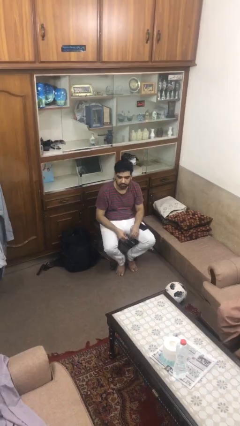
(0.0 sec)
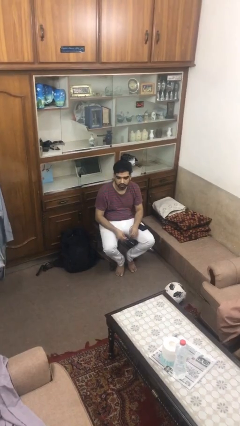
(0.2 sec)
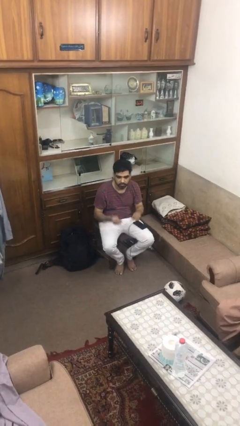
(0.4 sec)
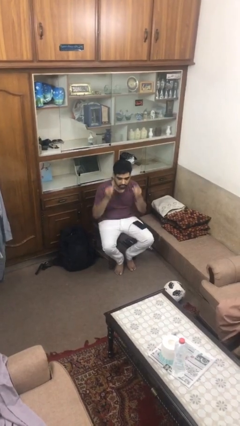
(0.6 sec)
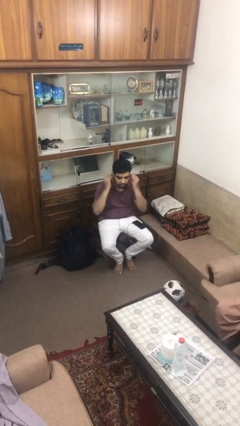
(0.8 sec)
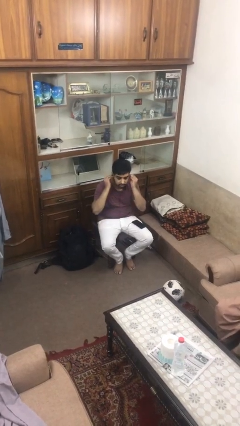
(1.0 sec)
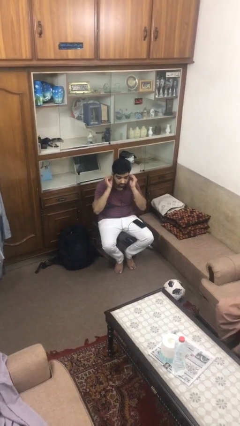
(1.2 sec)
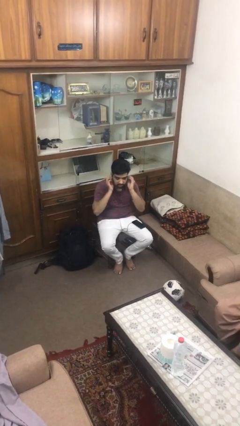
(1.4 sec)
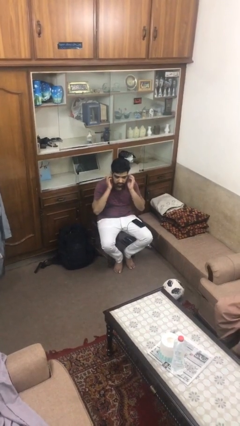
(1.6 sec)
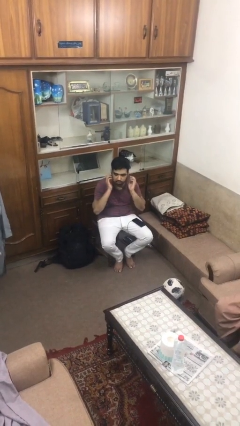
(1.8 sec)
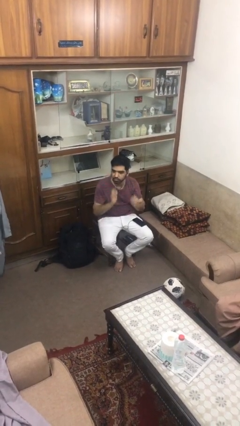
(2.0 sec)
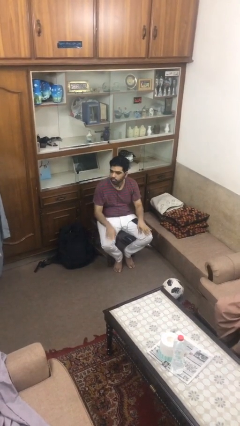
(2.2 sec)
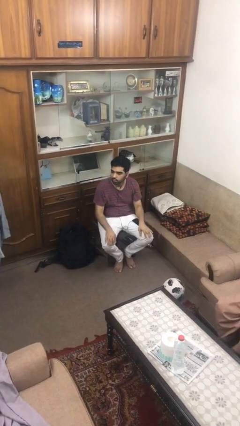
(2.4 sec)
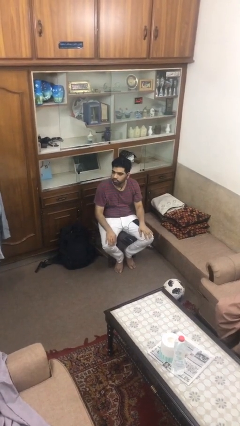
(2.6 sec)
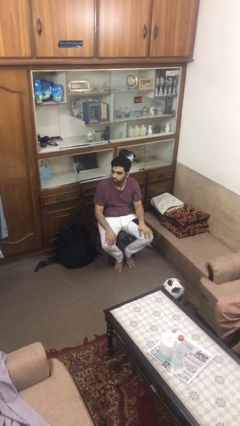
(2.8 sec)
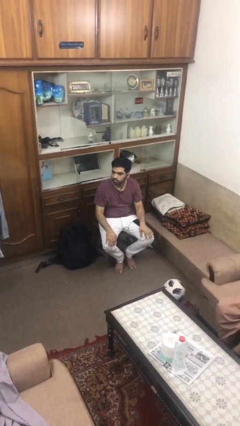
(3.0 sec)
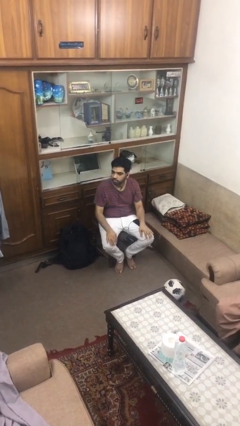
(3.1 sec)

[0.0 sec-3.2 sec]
person puts on headphones

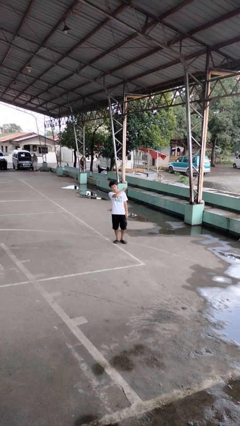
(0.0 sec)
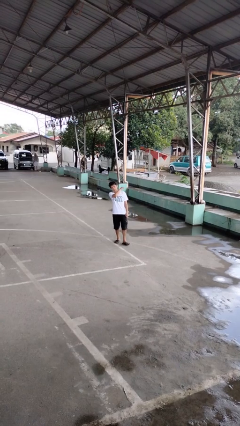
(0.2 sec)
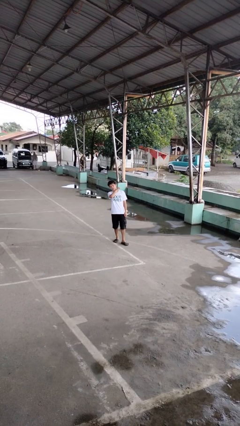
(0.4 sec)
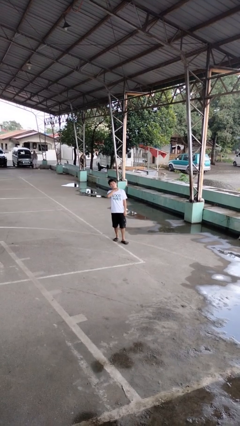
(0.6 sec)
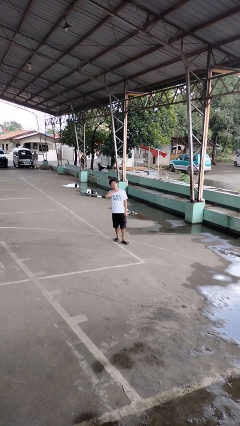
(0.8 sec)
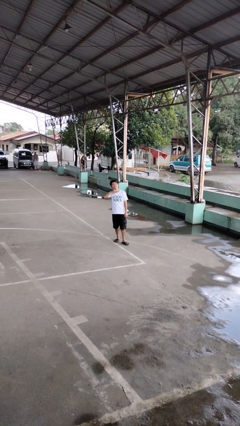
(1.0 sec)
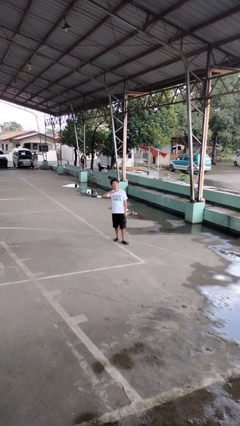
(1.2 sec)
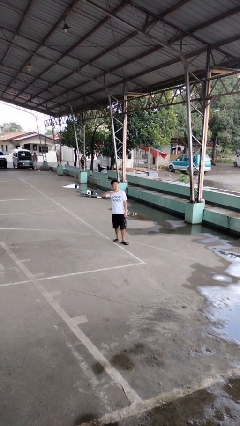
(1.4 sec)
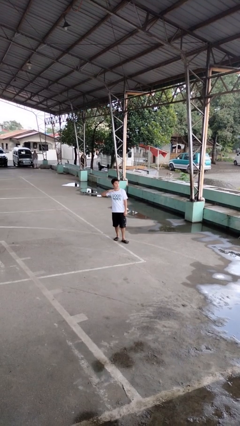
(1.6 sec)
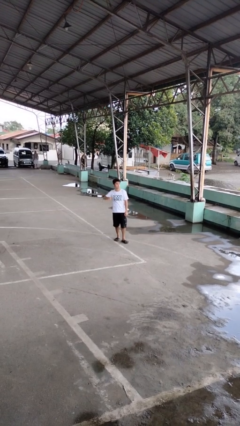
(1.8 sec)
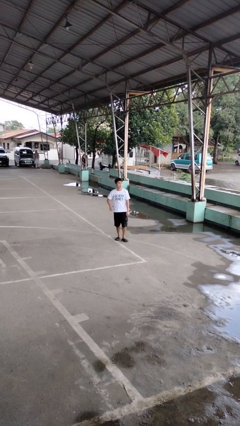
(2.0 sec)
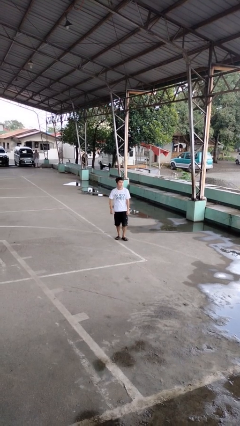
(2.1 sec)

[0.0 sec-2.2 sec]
person gestures cut

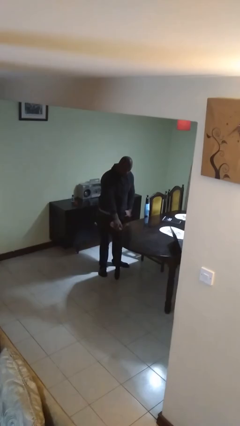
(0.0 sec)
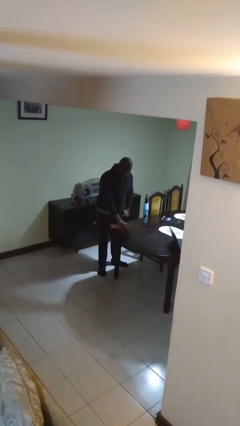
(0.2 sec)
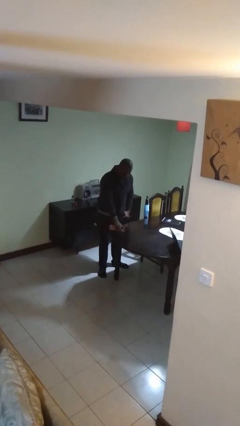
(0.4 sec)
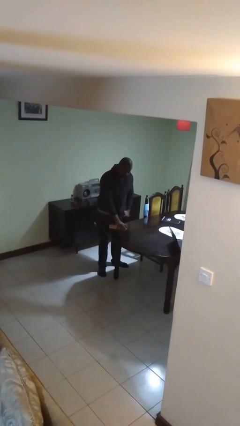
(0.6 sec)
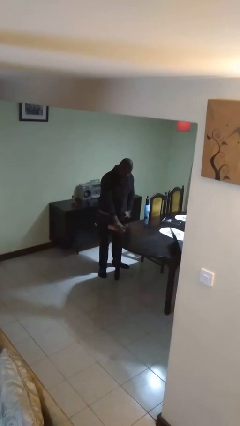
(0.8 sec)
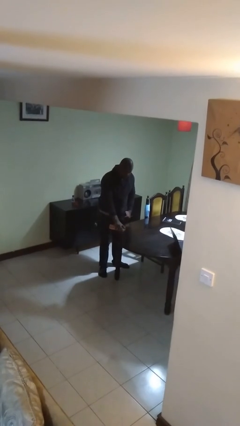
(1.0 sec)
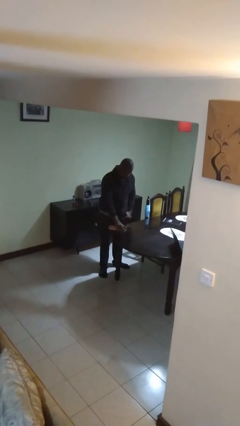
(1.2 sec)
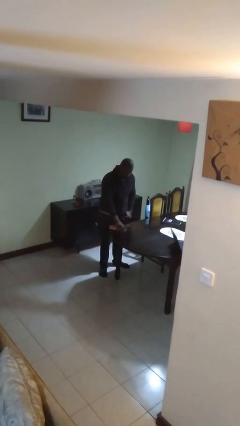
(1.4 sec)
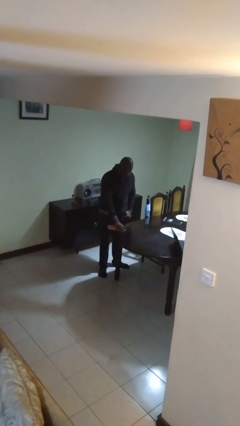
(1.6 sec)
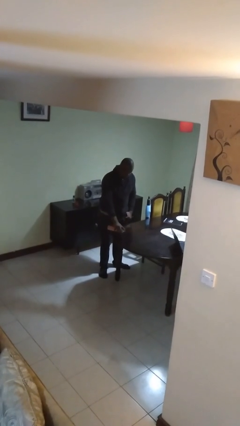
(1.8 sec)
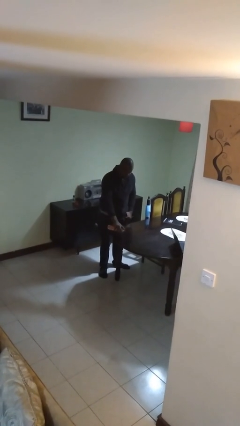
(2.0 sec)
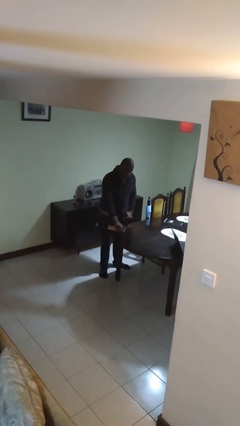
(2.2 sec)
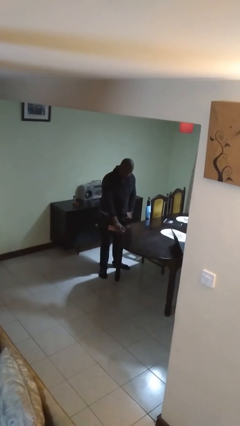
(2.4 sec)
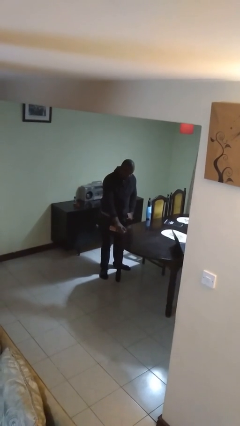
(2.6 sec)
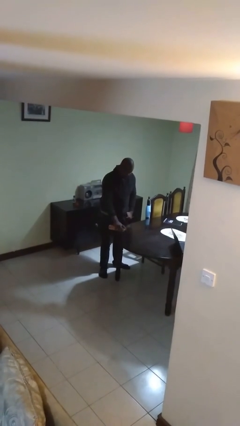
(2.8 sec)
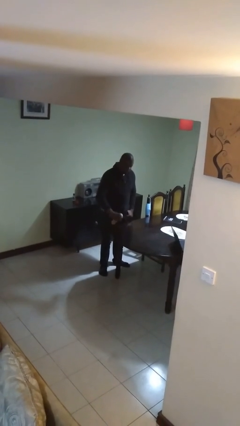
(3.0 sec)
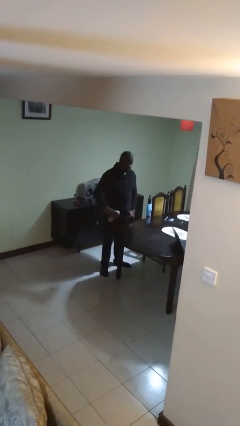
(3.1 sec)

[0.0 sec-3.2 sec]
person sprays from bottle

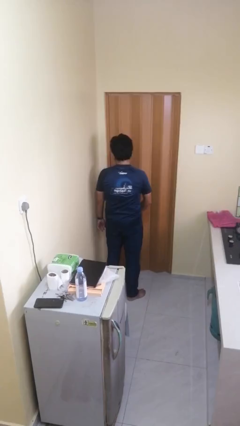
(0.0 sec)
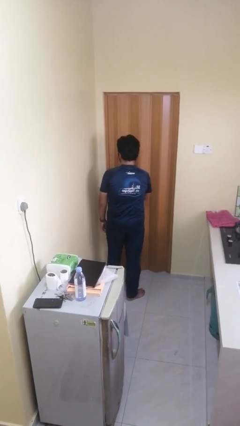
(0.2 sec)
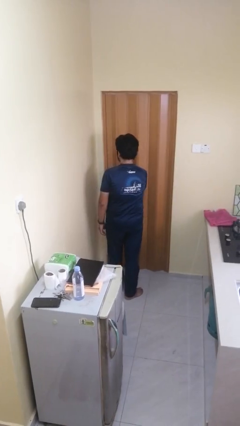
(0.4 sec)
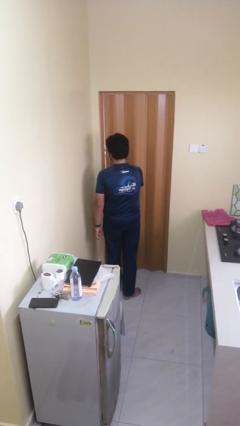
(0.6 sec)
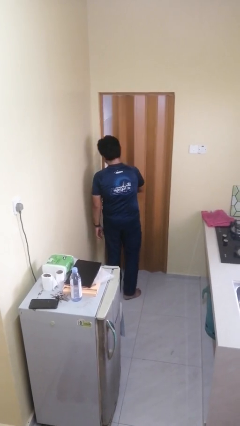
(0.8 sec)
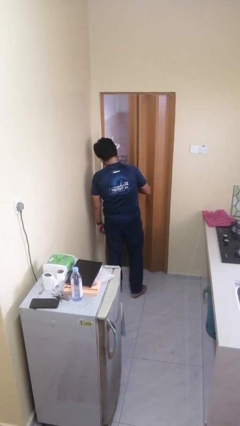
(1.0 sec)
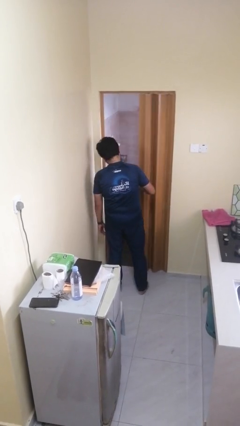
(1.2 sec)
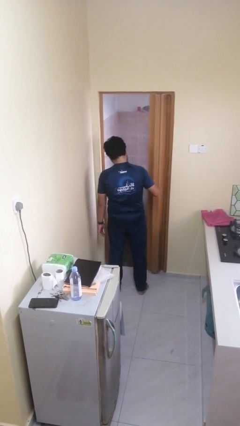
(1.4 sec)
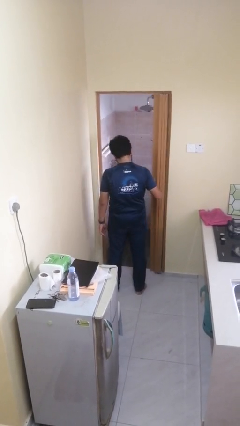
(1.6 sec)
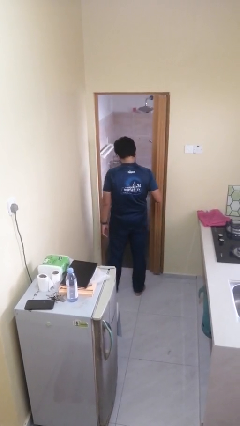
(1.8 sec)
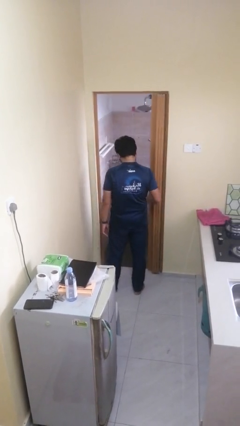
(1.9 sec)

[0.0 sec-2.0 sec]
person opens sliding door

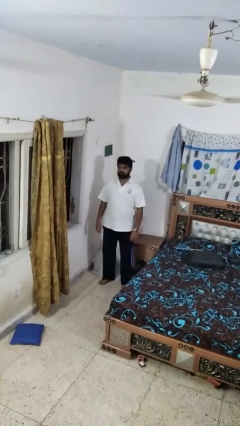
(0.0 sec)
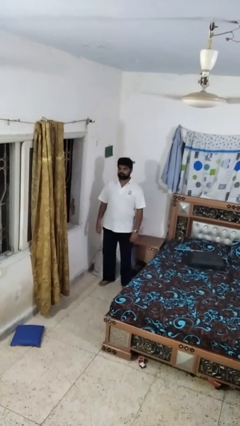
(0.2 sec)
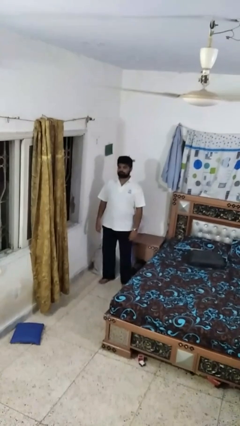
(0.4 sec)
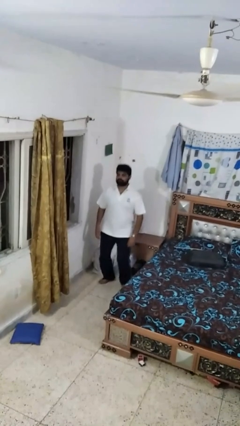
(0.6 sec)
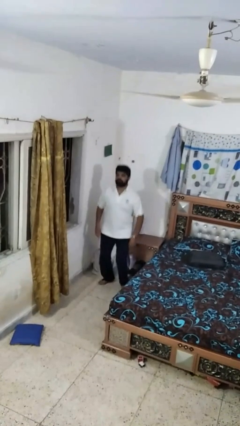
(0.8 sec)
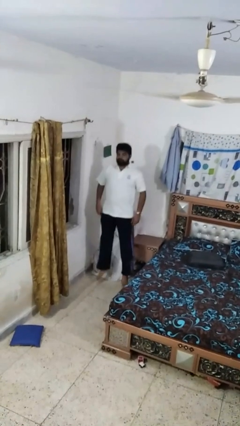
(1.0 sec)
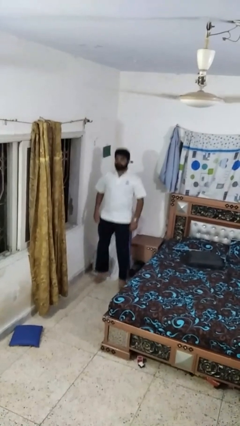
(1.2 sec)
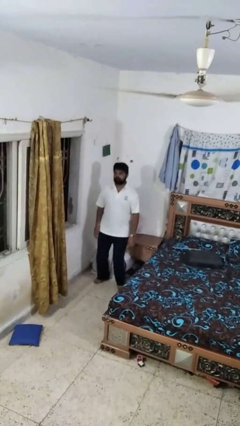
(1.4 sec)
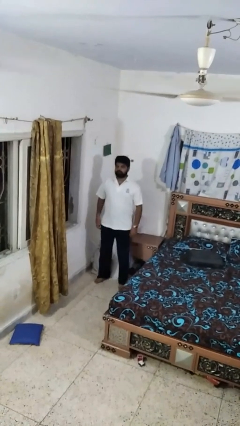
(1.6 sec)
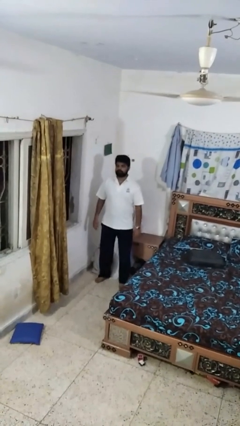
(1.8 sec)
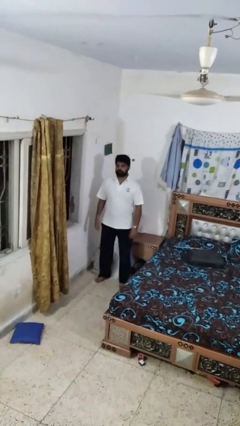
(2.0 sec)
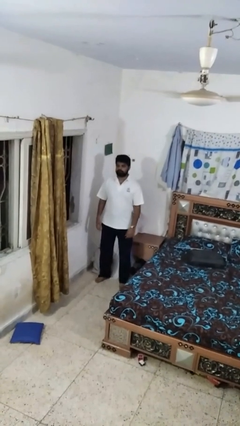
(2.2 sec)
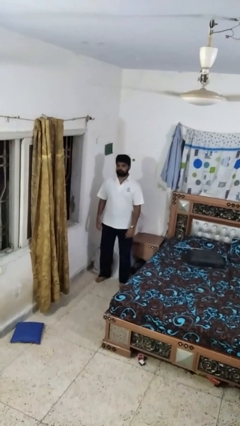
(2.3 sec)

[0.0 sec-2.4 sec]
person jumps

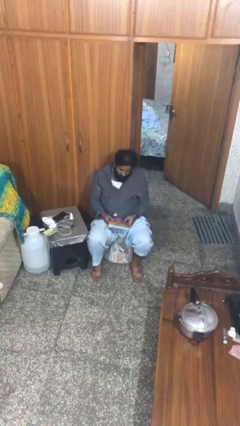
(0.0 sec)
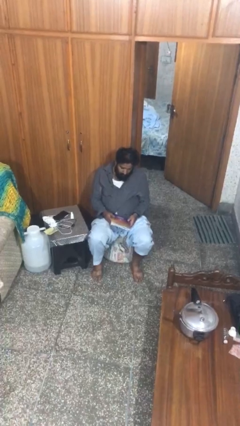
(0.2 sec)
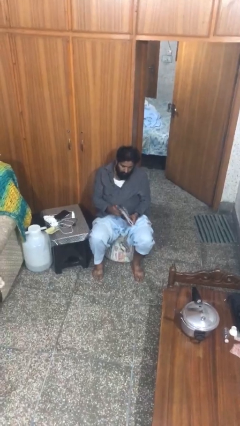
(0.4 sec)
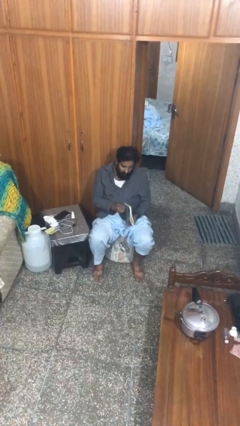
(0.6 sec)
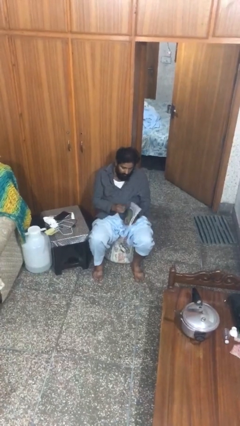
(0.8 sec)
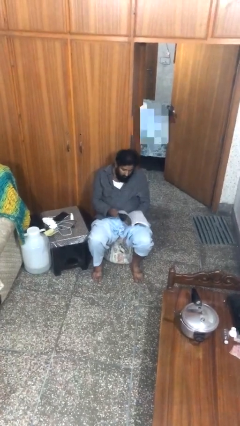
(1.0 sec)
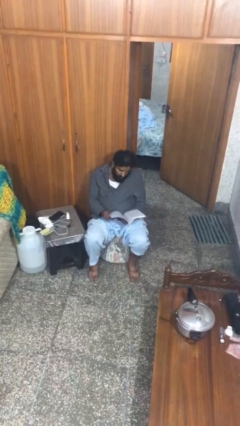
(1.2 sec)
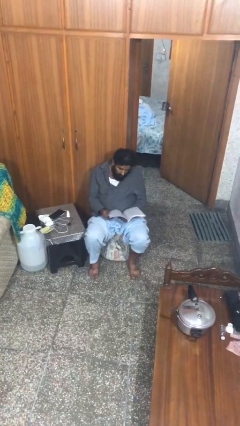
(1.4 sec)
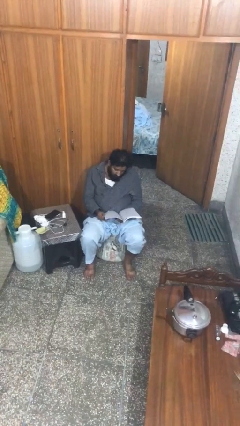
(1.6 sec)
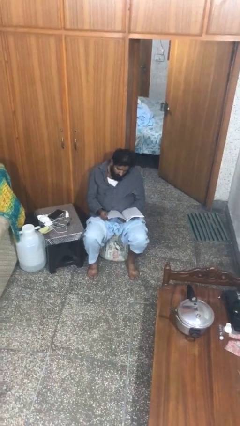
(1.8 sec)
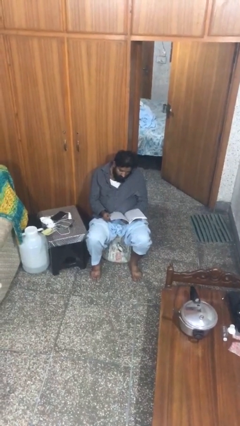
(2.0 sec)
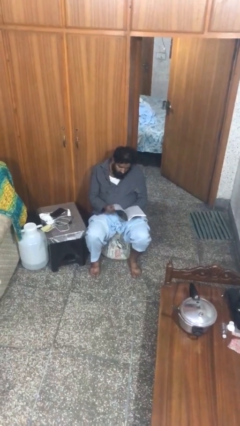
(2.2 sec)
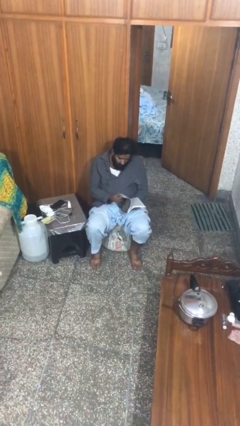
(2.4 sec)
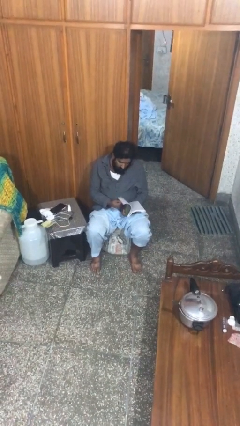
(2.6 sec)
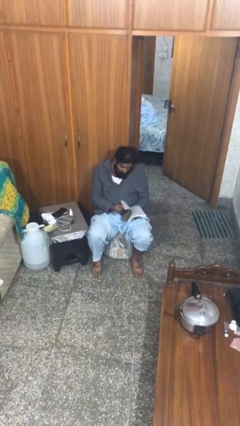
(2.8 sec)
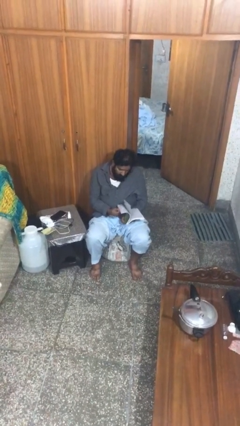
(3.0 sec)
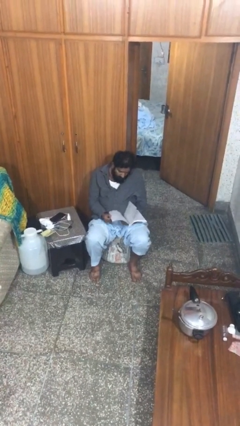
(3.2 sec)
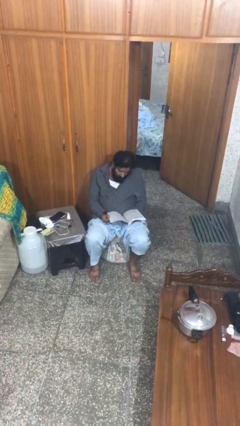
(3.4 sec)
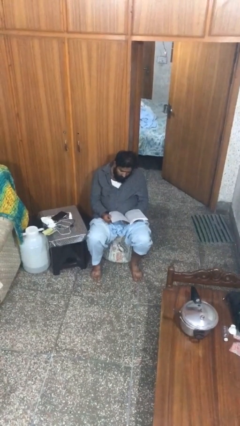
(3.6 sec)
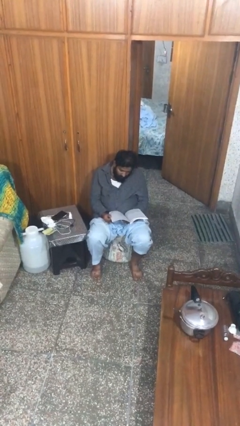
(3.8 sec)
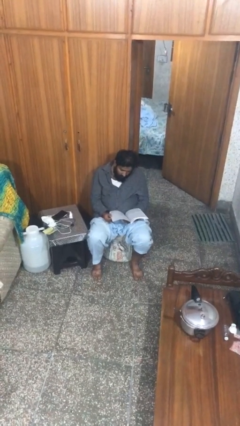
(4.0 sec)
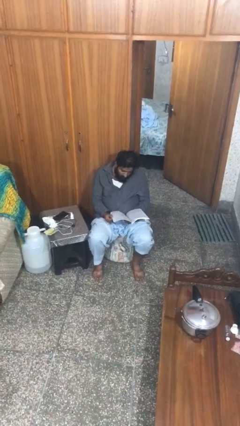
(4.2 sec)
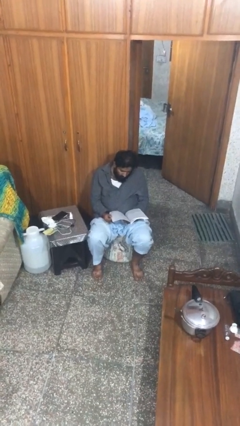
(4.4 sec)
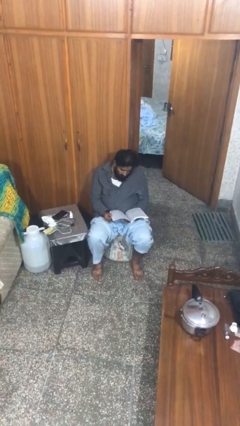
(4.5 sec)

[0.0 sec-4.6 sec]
person reads document
